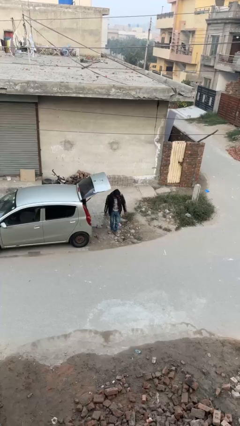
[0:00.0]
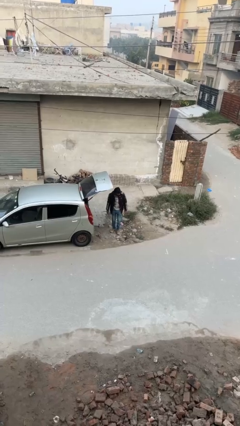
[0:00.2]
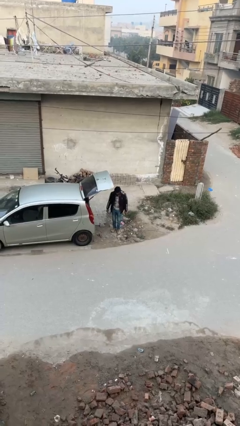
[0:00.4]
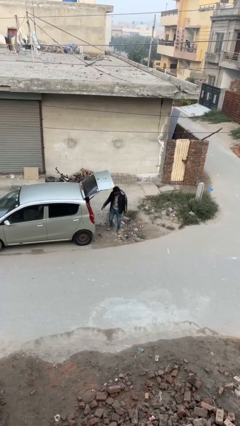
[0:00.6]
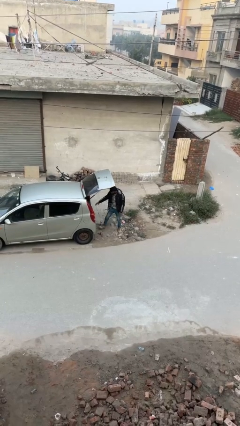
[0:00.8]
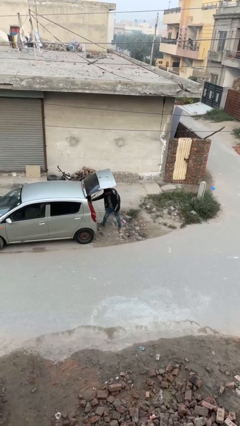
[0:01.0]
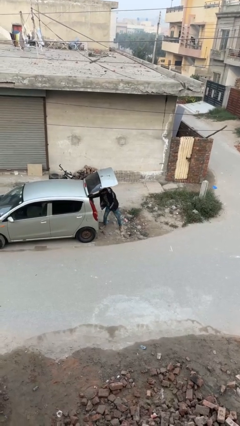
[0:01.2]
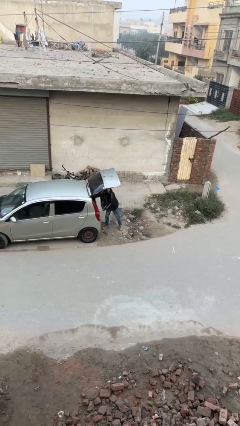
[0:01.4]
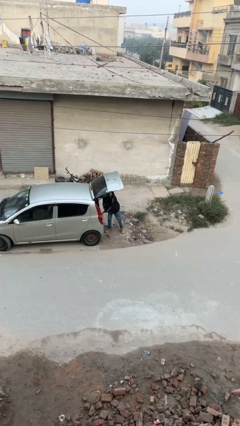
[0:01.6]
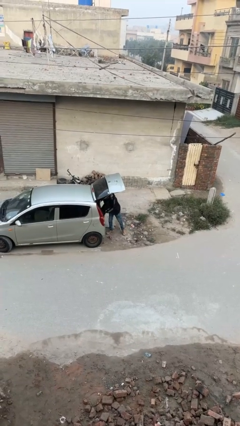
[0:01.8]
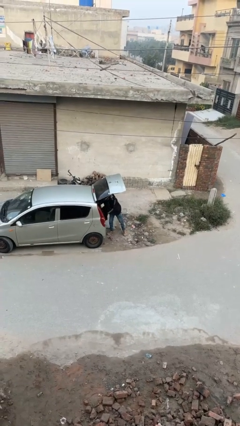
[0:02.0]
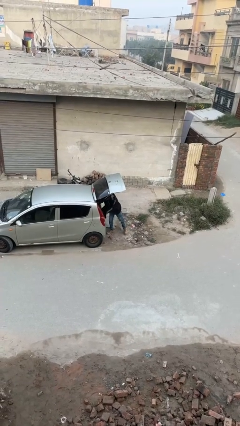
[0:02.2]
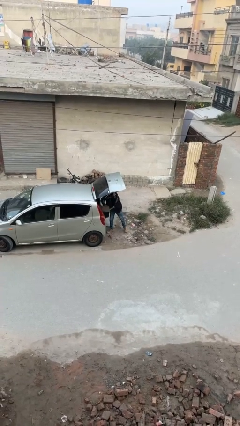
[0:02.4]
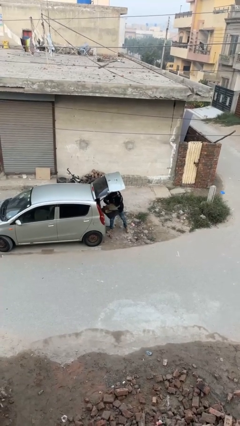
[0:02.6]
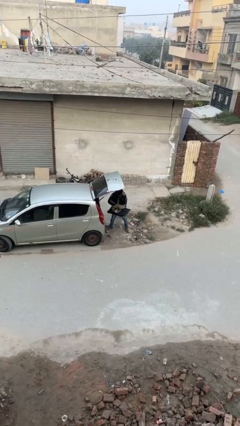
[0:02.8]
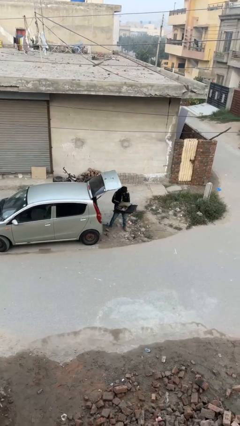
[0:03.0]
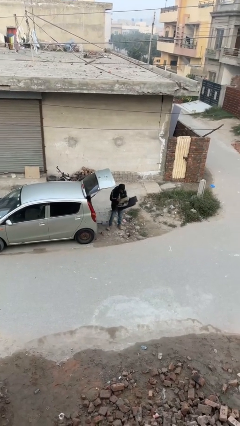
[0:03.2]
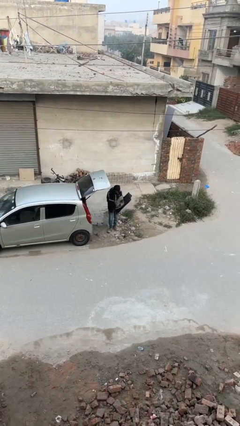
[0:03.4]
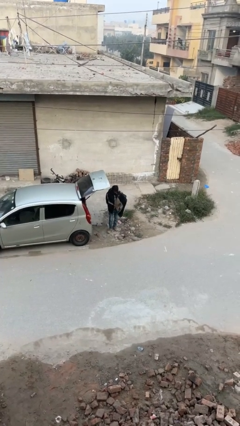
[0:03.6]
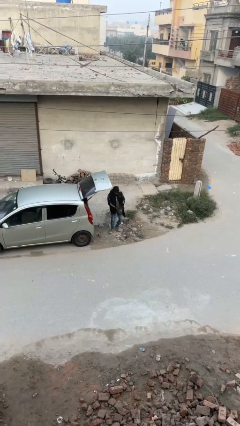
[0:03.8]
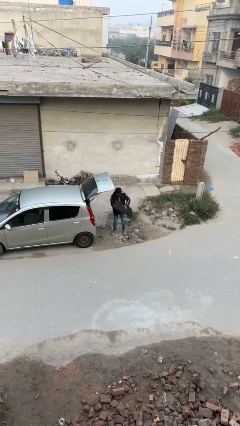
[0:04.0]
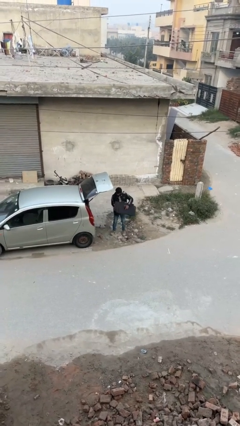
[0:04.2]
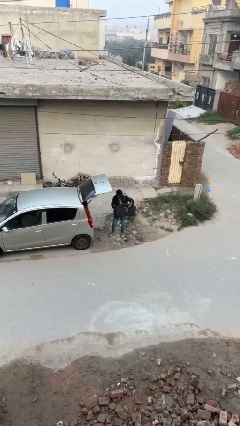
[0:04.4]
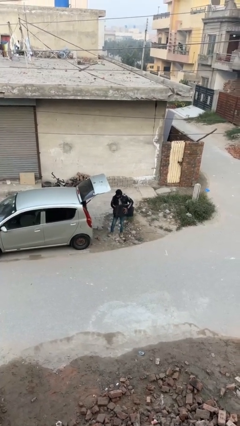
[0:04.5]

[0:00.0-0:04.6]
person unloads car

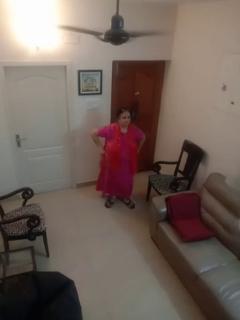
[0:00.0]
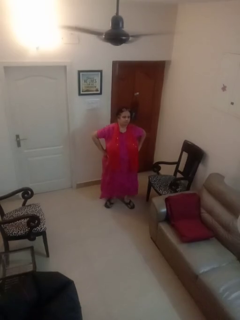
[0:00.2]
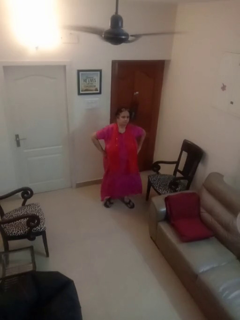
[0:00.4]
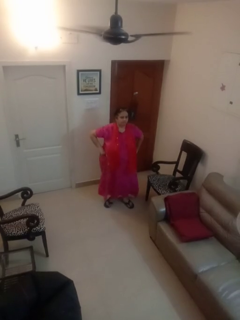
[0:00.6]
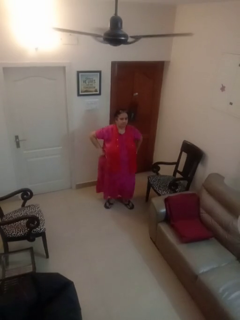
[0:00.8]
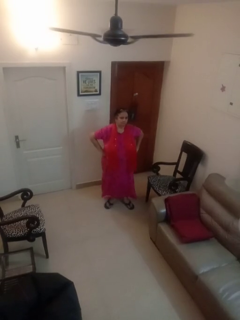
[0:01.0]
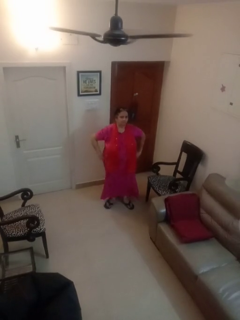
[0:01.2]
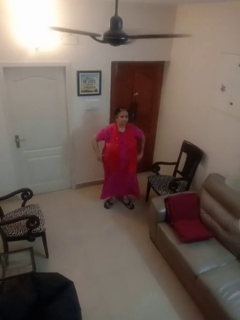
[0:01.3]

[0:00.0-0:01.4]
person wiggles hips

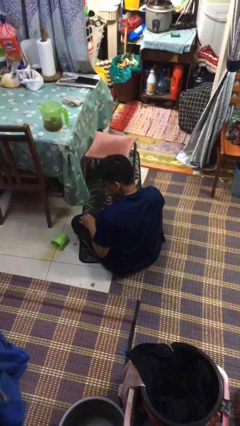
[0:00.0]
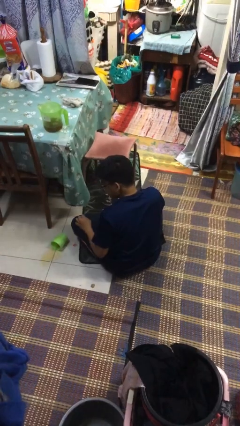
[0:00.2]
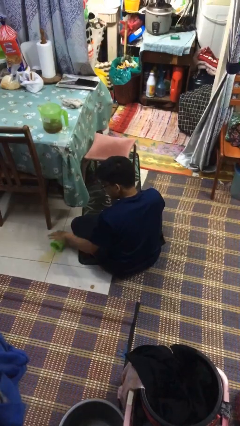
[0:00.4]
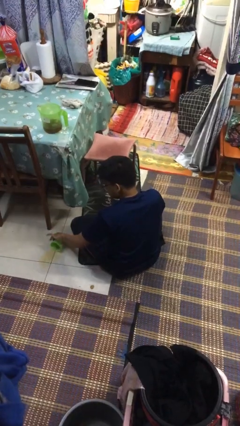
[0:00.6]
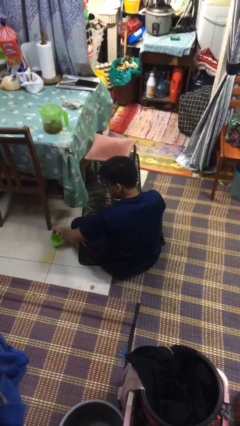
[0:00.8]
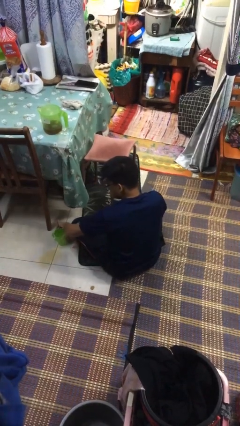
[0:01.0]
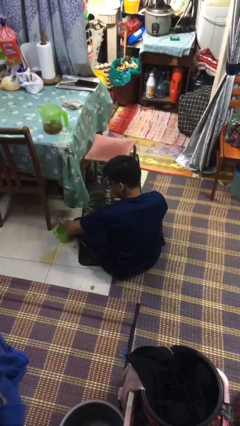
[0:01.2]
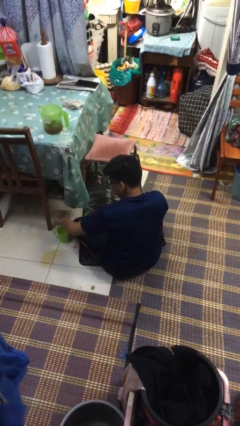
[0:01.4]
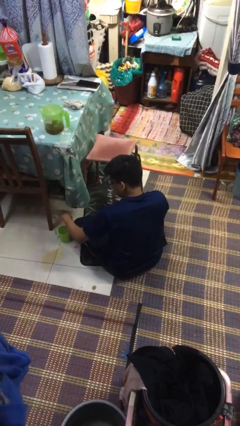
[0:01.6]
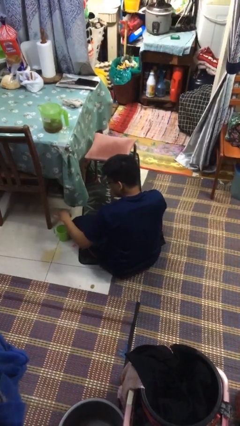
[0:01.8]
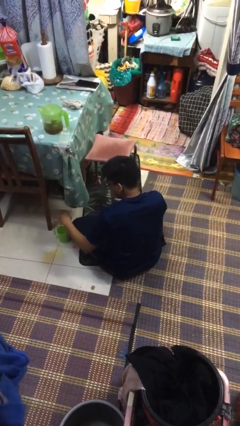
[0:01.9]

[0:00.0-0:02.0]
person sets upright glass

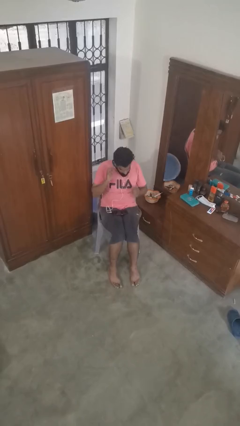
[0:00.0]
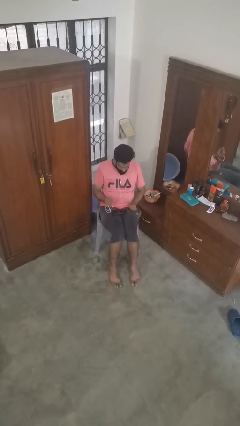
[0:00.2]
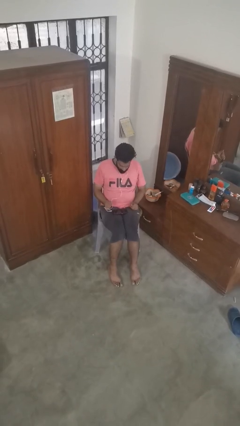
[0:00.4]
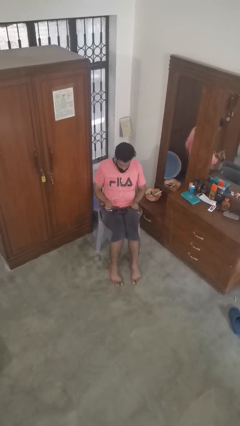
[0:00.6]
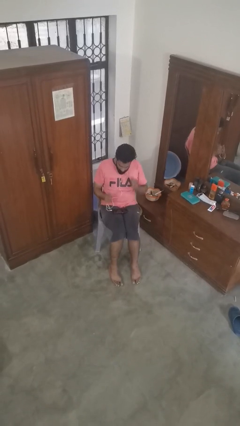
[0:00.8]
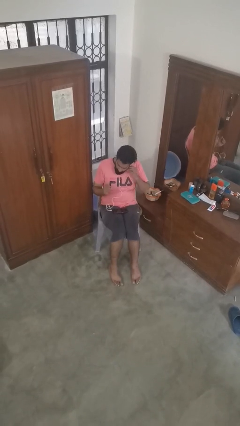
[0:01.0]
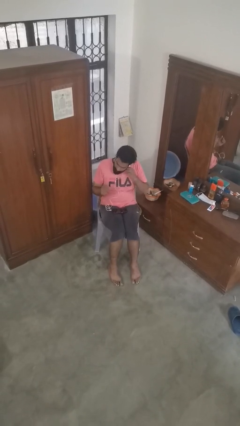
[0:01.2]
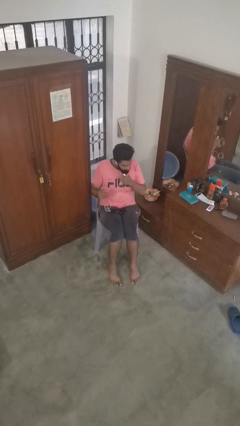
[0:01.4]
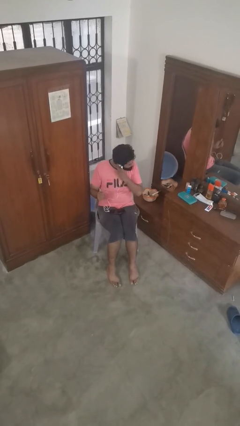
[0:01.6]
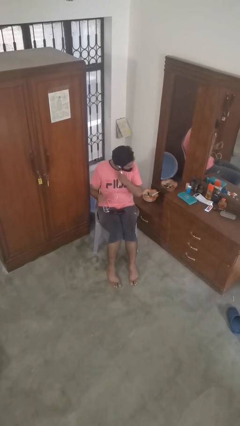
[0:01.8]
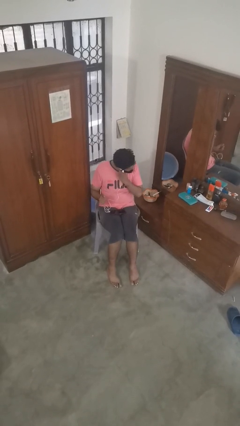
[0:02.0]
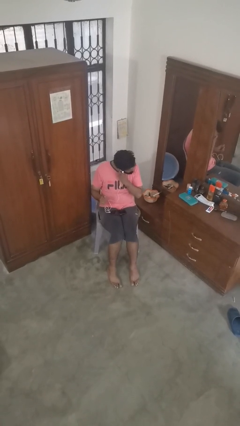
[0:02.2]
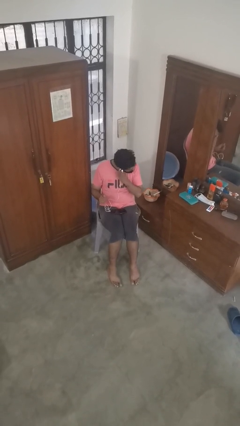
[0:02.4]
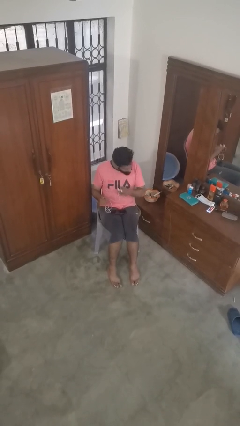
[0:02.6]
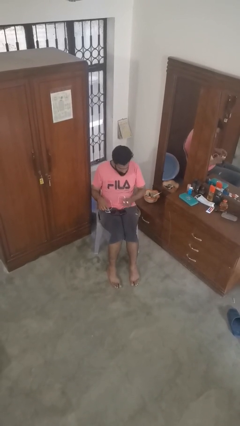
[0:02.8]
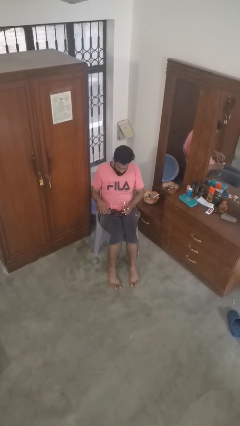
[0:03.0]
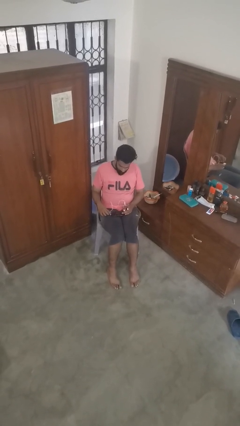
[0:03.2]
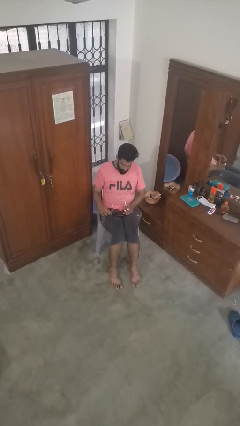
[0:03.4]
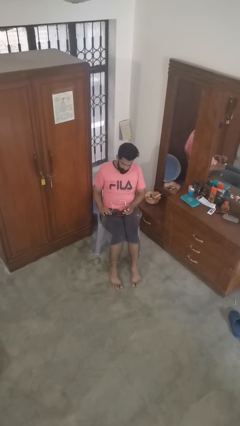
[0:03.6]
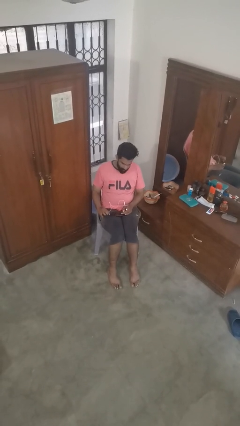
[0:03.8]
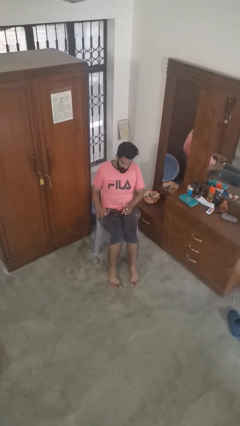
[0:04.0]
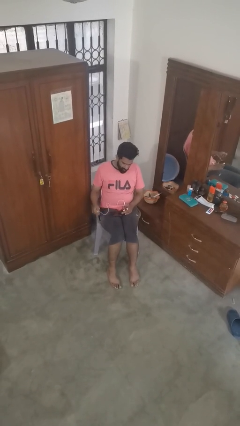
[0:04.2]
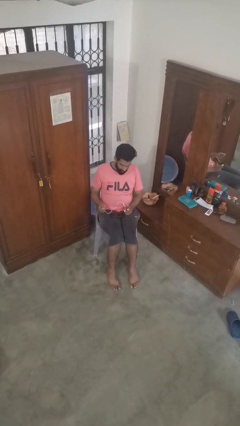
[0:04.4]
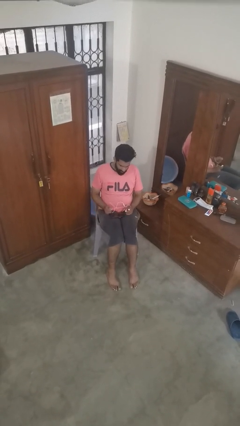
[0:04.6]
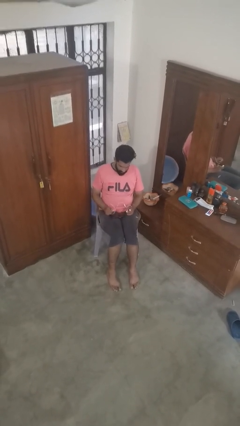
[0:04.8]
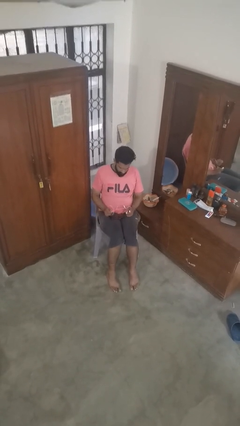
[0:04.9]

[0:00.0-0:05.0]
person takes off headphones

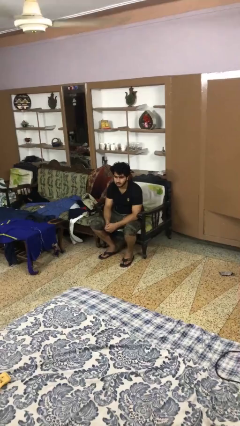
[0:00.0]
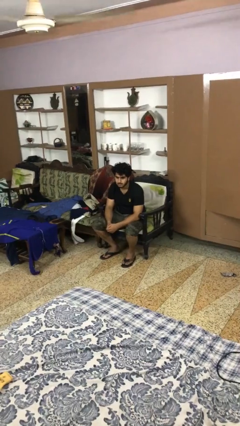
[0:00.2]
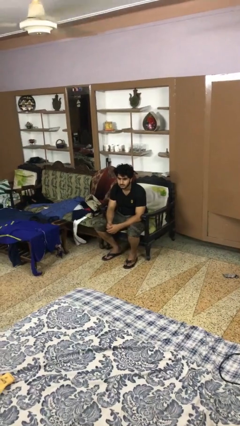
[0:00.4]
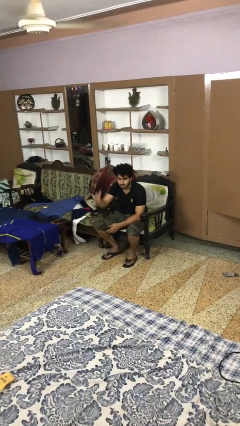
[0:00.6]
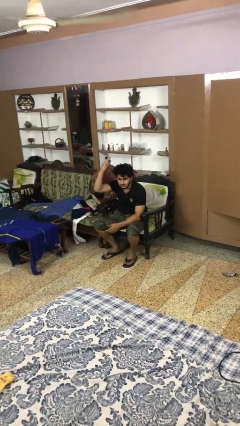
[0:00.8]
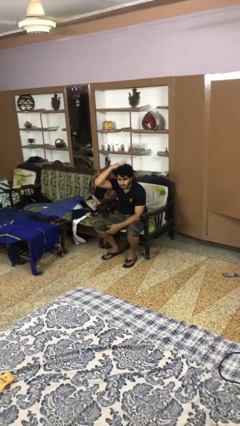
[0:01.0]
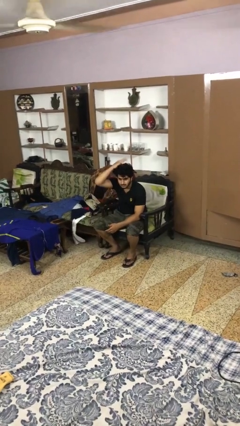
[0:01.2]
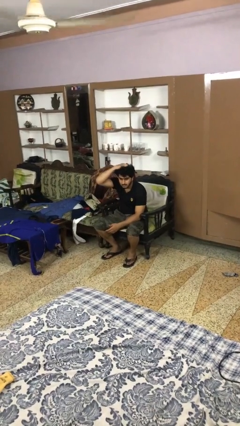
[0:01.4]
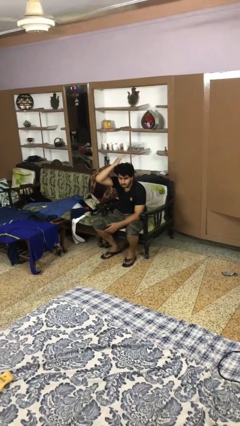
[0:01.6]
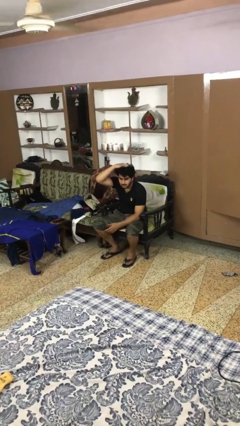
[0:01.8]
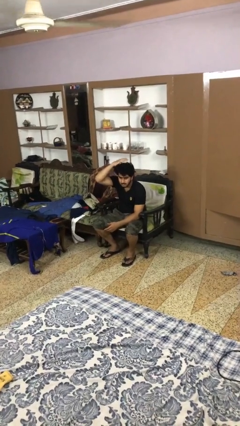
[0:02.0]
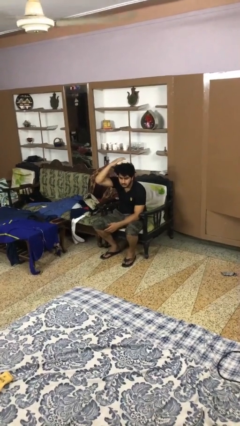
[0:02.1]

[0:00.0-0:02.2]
person pats head

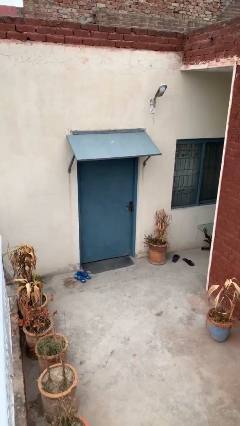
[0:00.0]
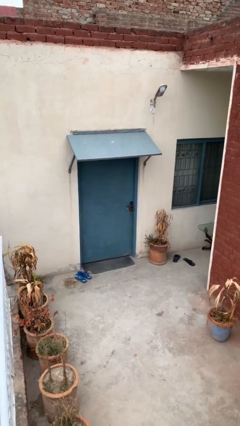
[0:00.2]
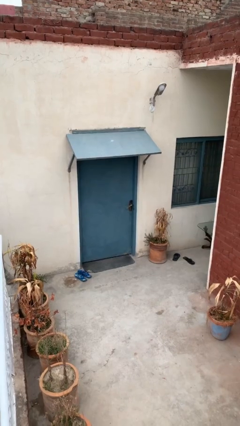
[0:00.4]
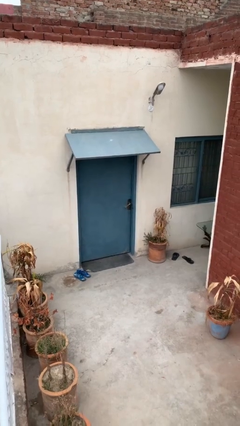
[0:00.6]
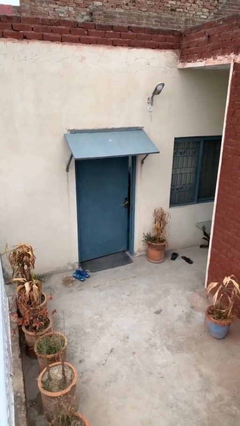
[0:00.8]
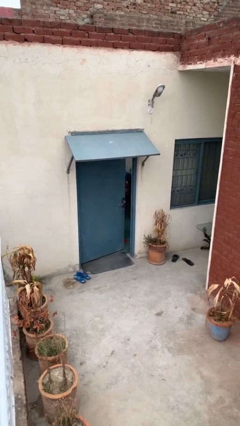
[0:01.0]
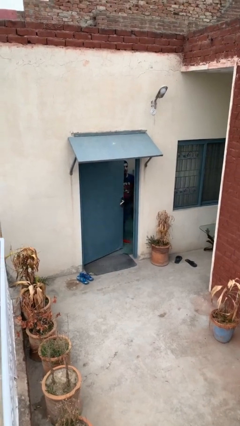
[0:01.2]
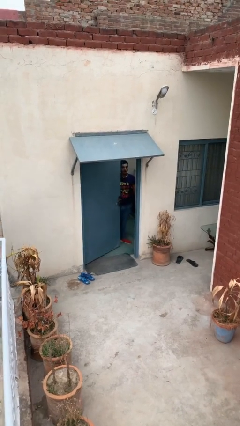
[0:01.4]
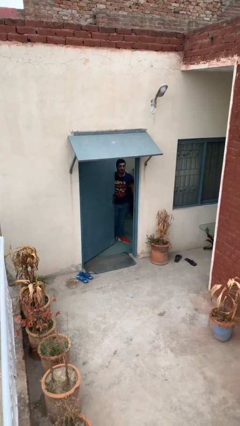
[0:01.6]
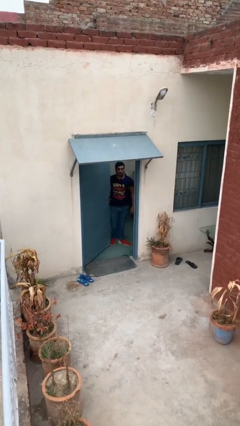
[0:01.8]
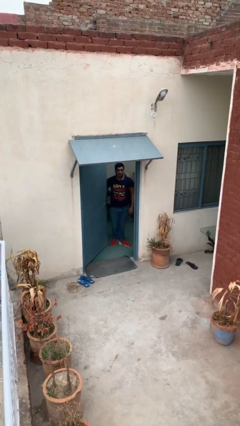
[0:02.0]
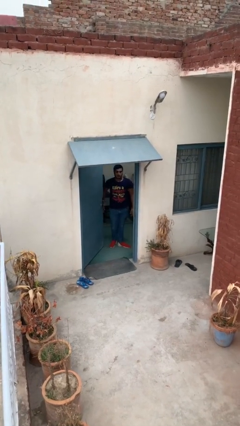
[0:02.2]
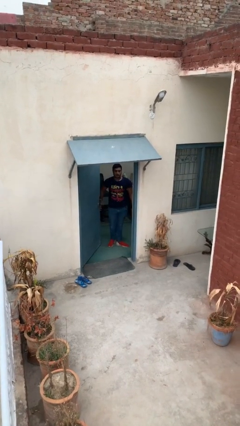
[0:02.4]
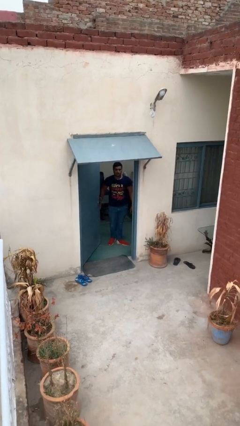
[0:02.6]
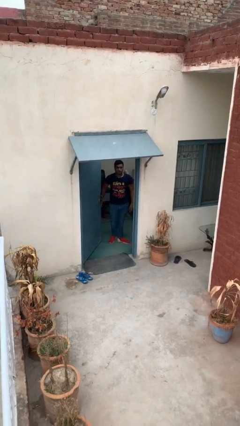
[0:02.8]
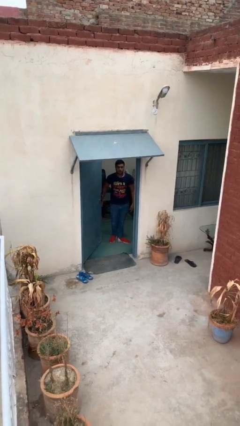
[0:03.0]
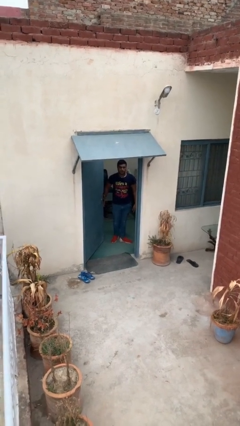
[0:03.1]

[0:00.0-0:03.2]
person opens facility door
